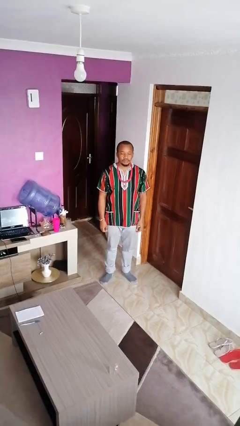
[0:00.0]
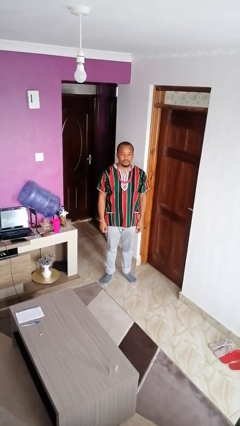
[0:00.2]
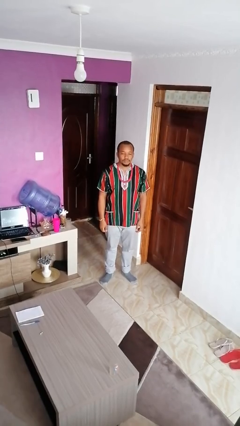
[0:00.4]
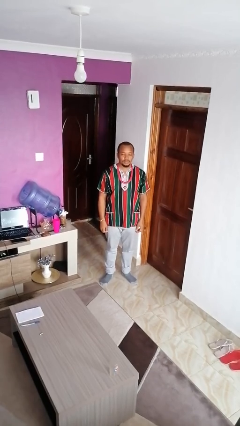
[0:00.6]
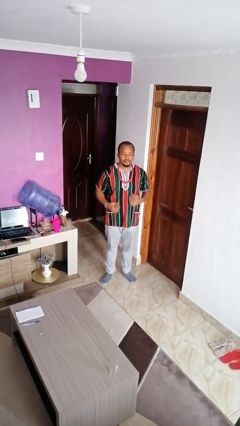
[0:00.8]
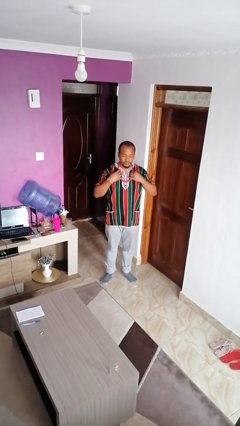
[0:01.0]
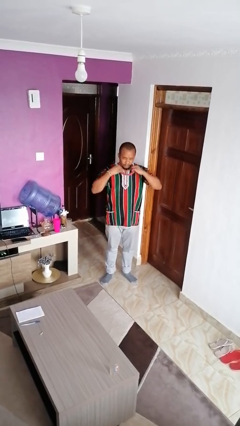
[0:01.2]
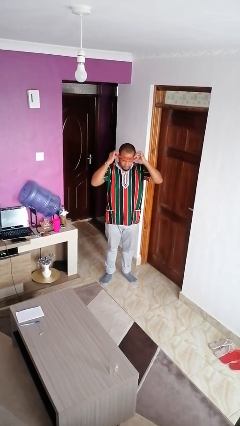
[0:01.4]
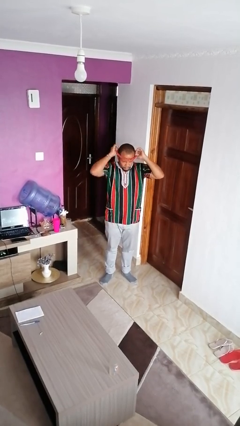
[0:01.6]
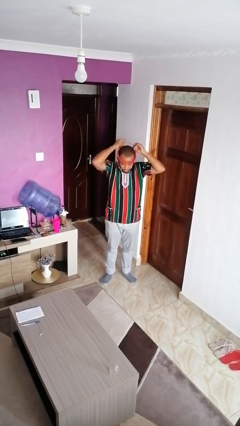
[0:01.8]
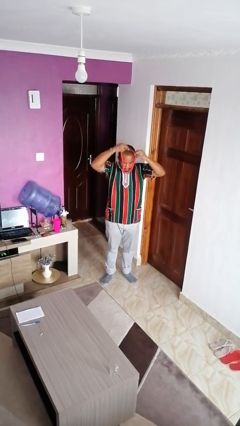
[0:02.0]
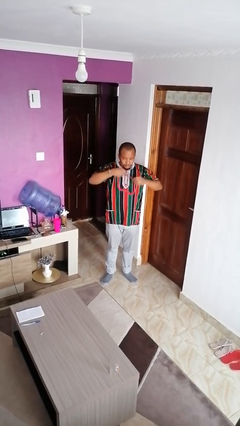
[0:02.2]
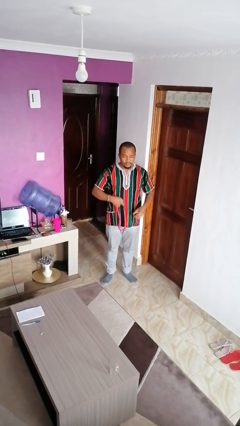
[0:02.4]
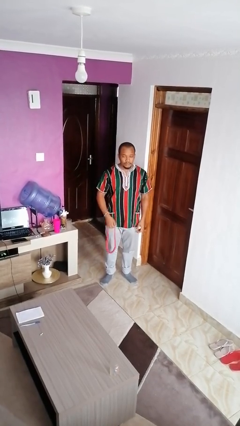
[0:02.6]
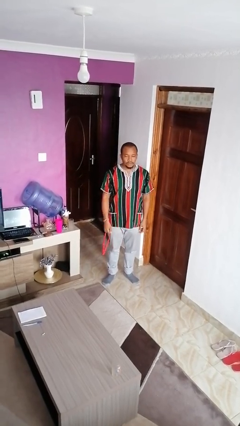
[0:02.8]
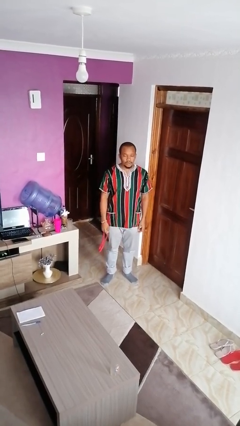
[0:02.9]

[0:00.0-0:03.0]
person takes off necklace

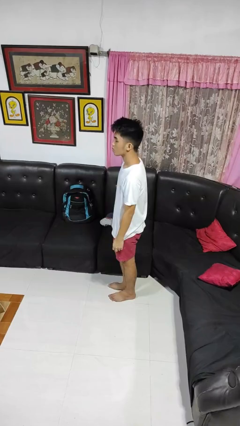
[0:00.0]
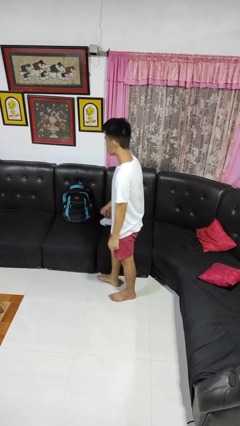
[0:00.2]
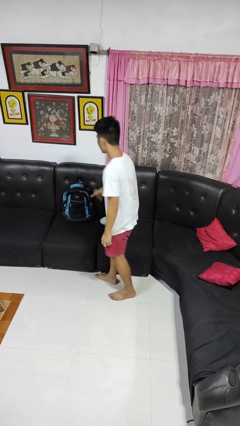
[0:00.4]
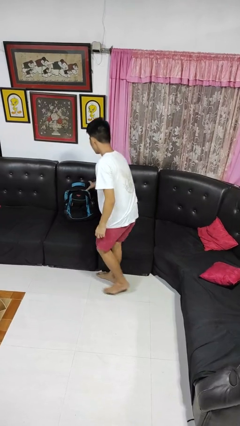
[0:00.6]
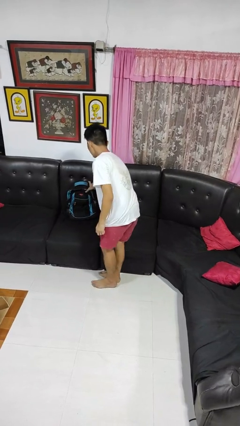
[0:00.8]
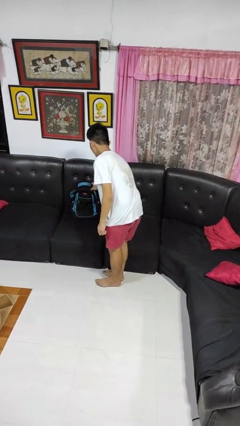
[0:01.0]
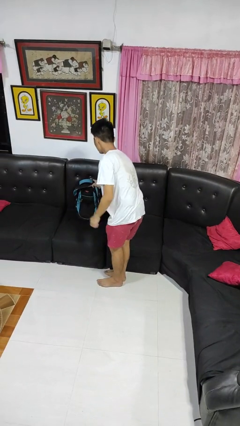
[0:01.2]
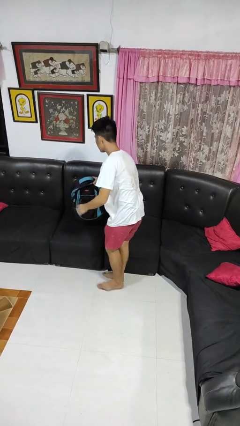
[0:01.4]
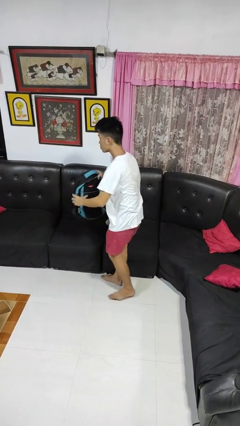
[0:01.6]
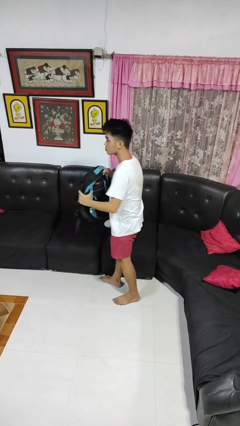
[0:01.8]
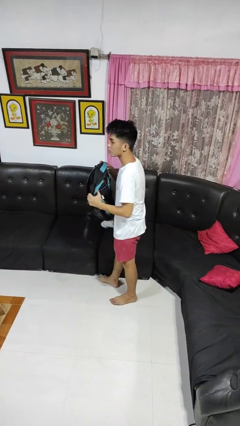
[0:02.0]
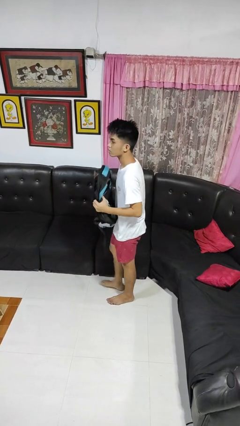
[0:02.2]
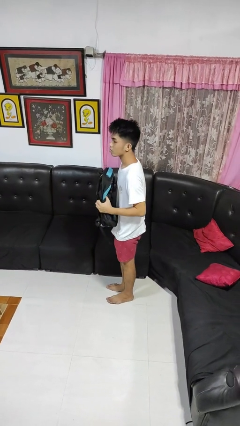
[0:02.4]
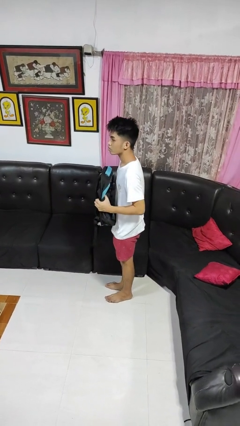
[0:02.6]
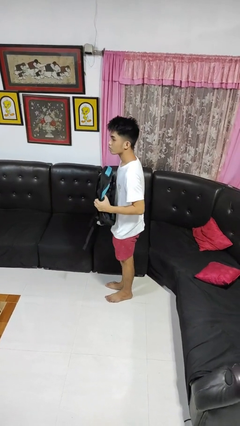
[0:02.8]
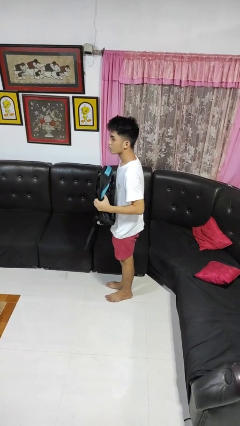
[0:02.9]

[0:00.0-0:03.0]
person picks up object from couch

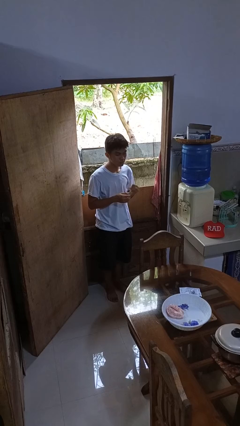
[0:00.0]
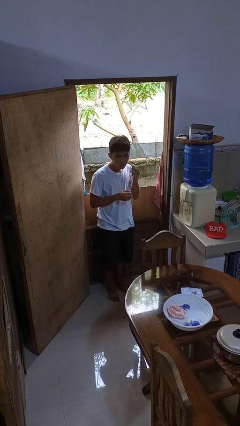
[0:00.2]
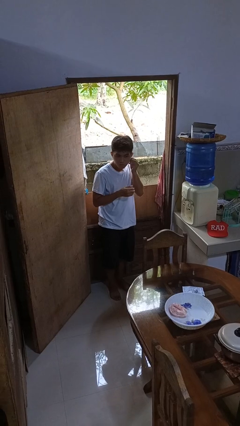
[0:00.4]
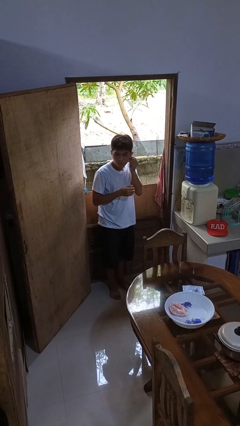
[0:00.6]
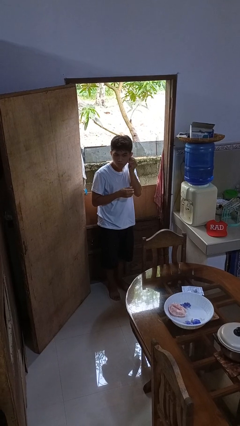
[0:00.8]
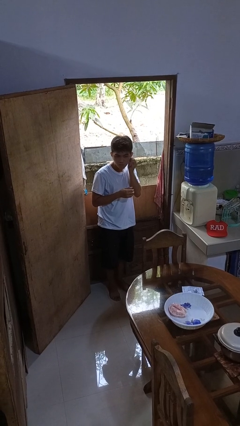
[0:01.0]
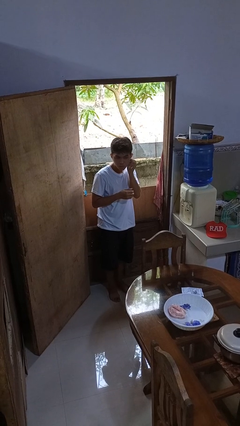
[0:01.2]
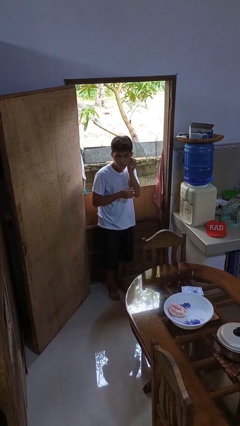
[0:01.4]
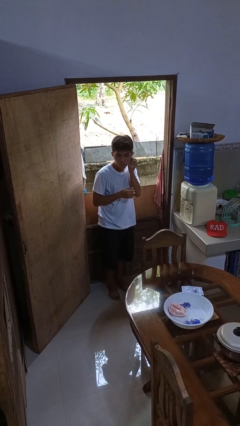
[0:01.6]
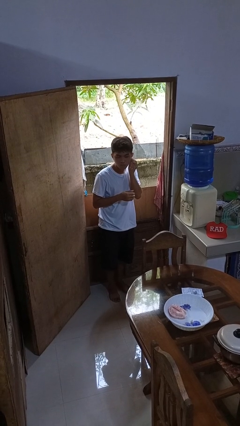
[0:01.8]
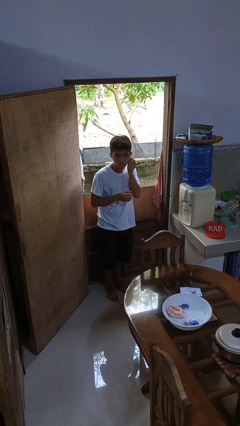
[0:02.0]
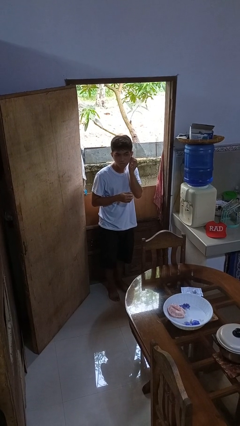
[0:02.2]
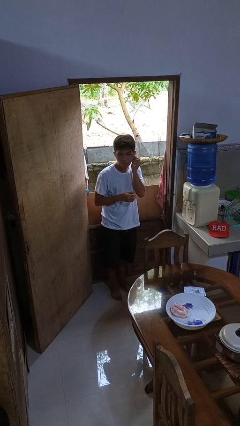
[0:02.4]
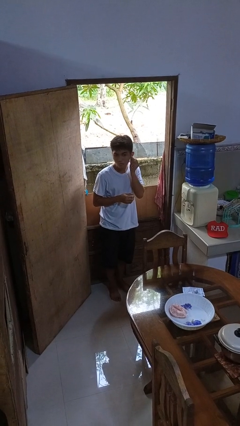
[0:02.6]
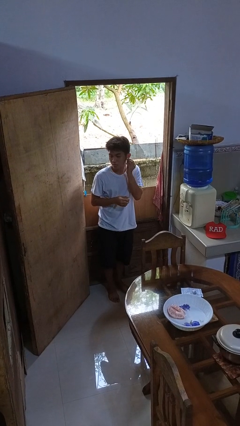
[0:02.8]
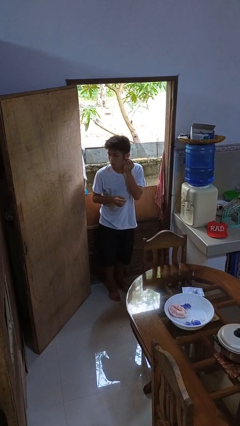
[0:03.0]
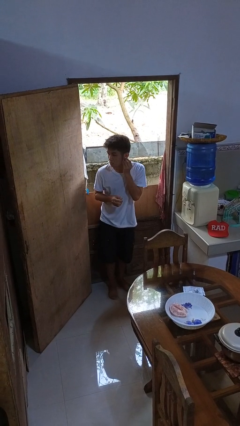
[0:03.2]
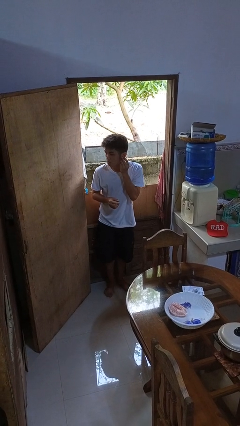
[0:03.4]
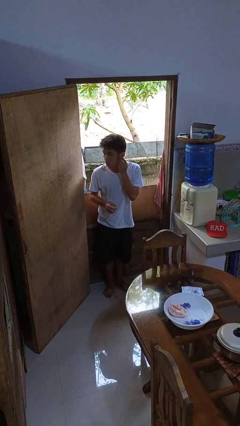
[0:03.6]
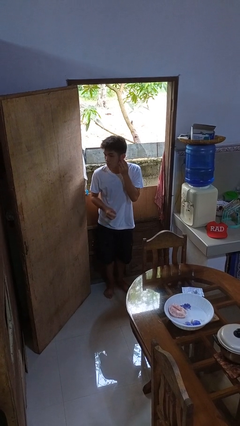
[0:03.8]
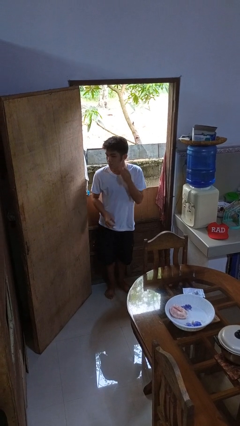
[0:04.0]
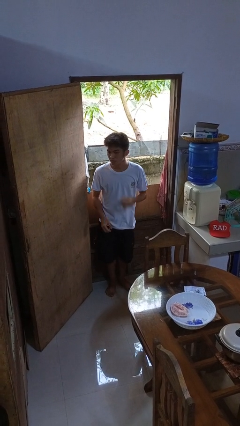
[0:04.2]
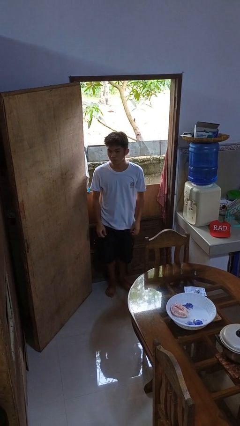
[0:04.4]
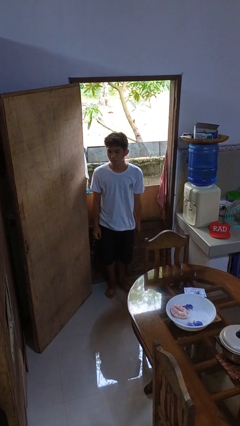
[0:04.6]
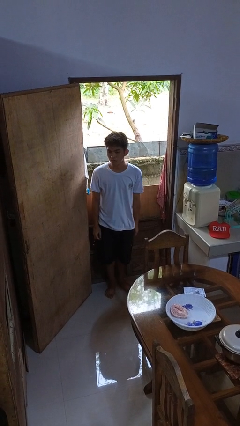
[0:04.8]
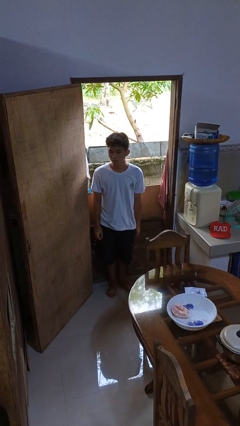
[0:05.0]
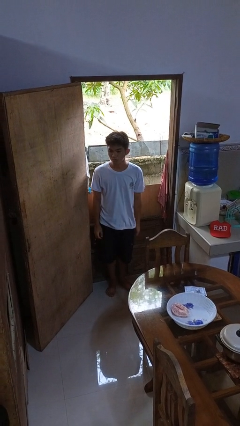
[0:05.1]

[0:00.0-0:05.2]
person puts on earrings

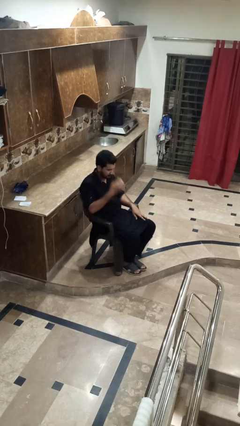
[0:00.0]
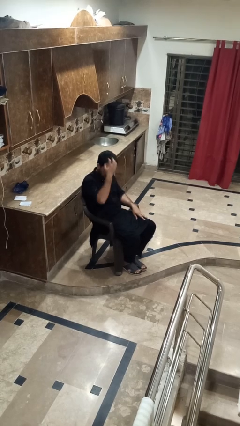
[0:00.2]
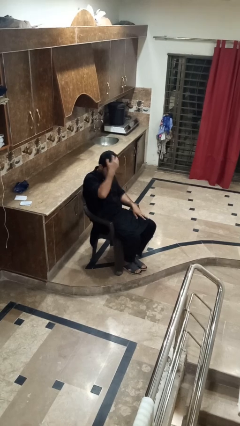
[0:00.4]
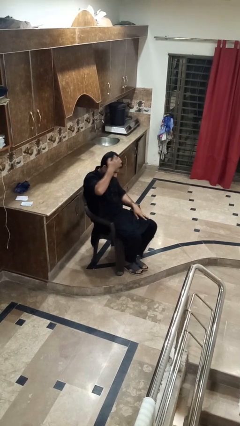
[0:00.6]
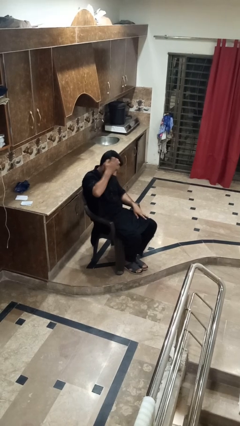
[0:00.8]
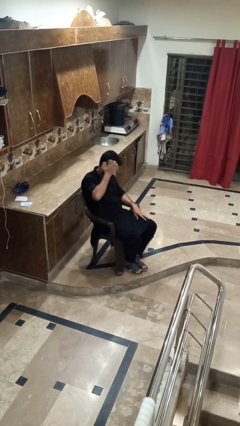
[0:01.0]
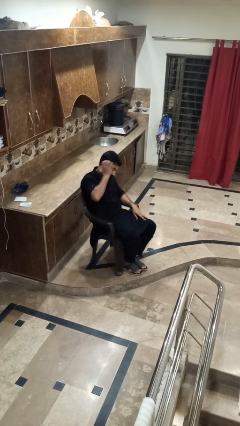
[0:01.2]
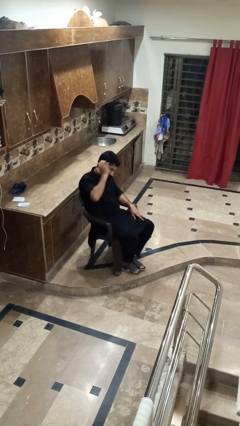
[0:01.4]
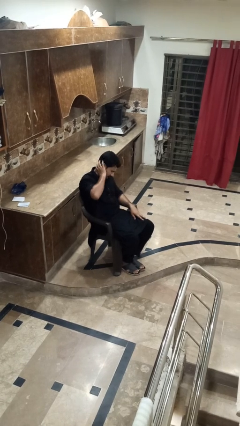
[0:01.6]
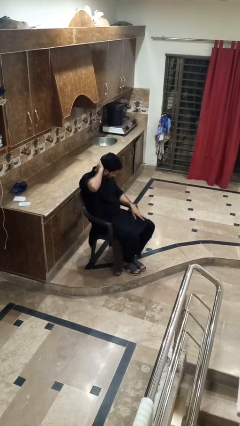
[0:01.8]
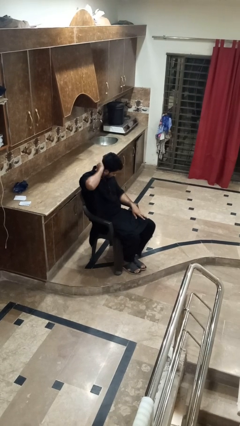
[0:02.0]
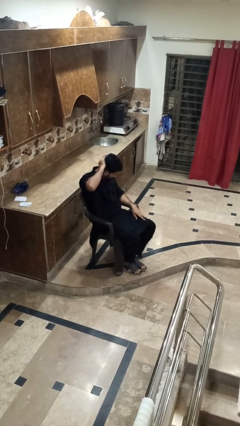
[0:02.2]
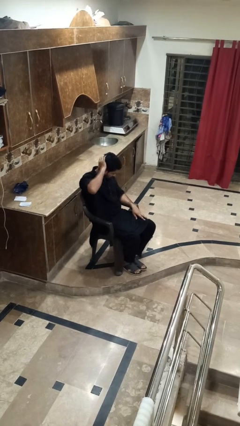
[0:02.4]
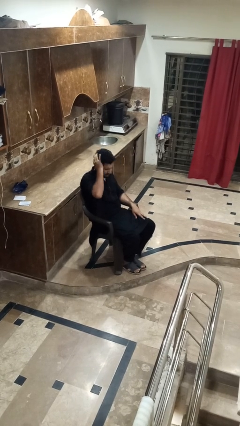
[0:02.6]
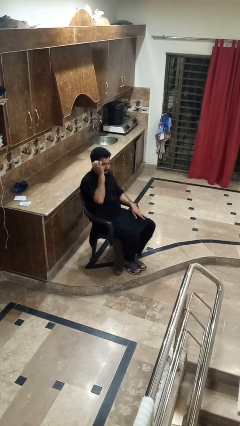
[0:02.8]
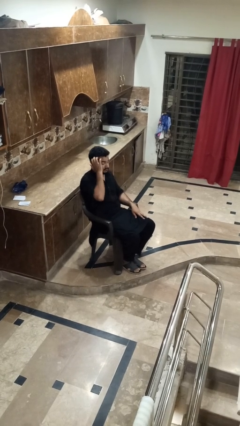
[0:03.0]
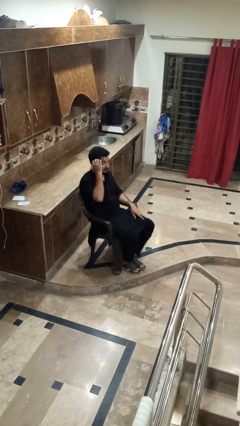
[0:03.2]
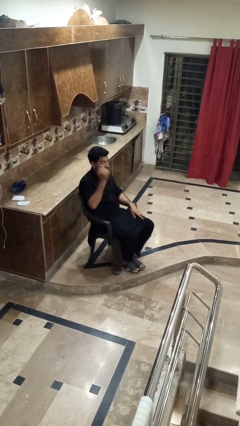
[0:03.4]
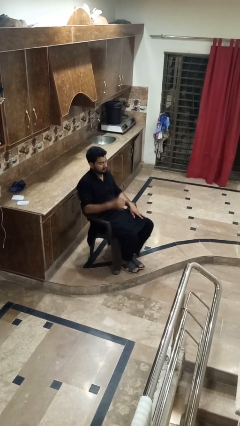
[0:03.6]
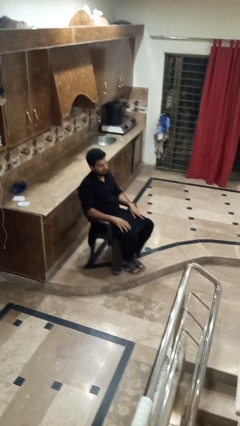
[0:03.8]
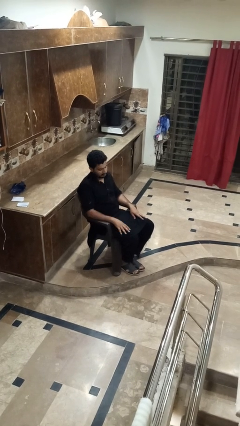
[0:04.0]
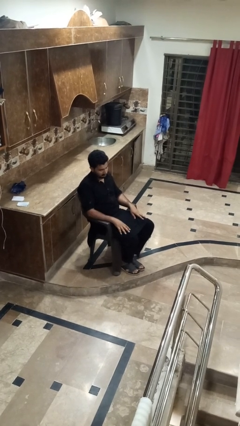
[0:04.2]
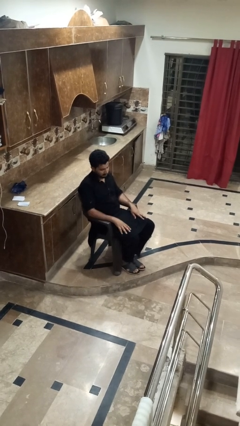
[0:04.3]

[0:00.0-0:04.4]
person scratches face

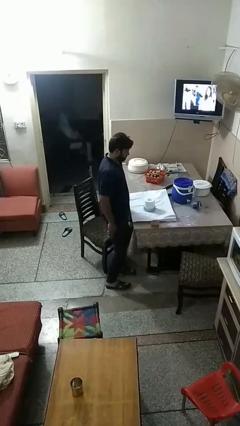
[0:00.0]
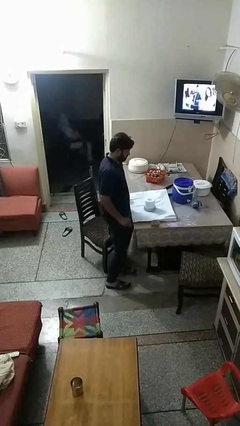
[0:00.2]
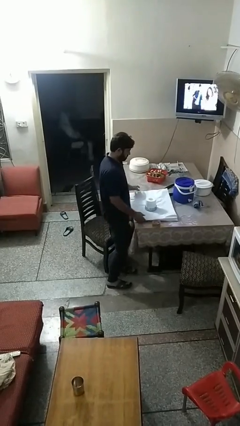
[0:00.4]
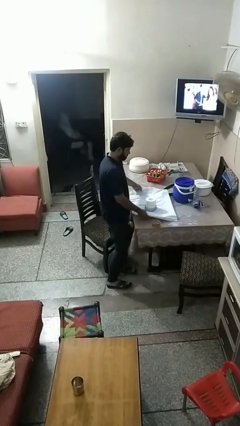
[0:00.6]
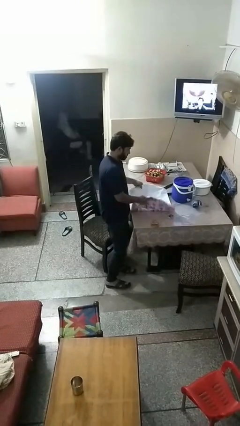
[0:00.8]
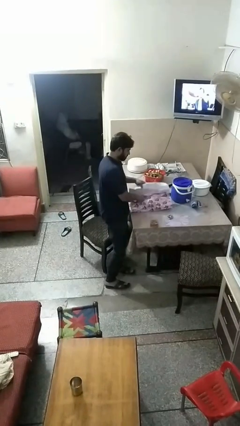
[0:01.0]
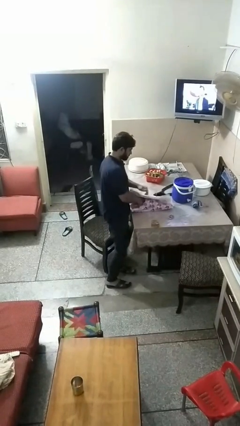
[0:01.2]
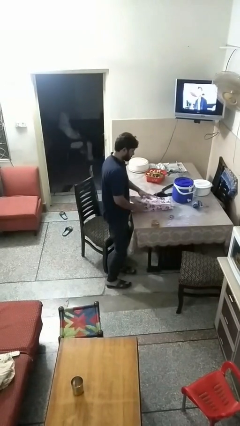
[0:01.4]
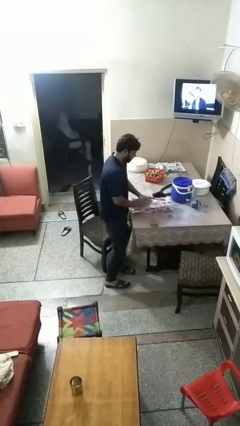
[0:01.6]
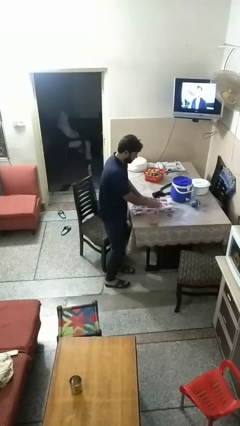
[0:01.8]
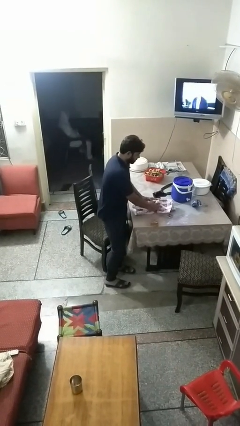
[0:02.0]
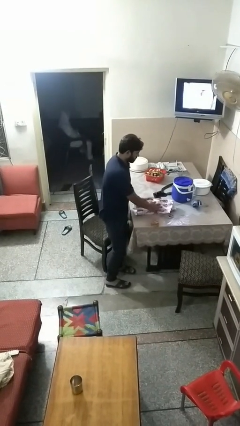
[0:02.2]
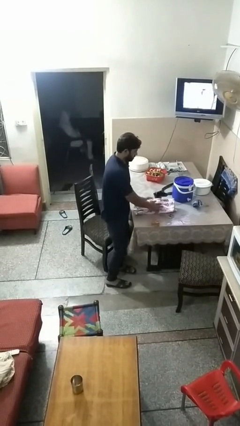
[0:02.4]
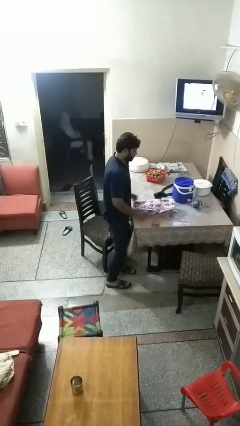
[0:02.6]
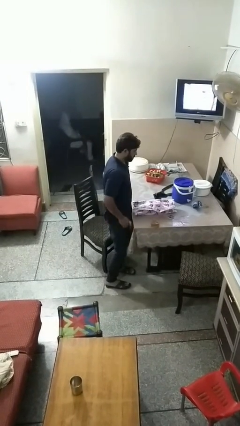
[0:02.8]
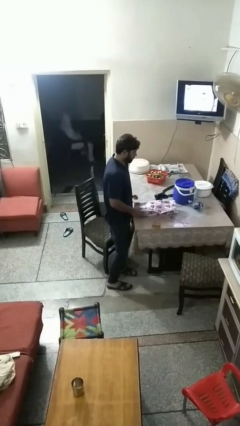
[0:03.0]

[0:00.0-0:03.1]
person wraps box
